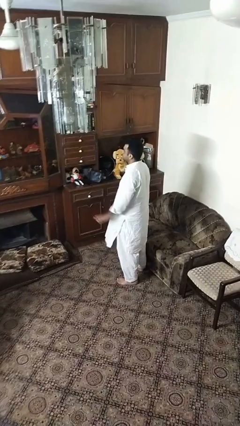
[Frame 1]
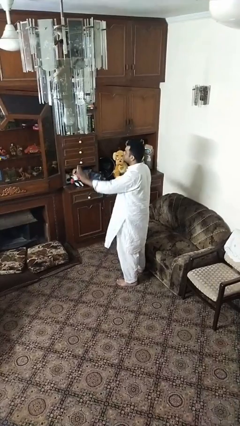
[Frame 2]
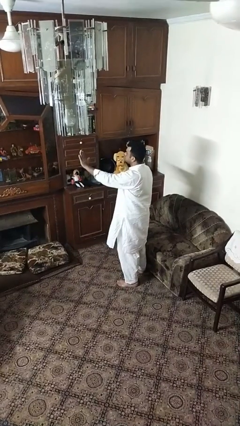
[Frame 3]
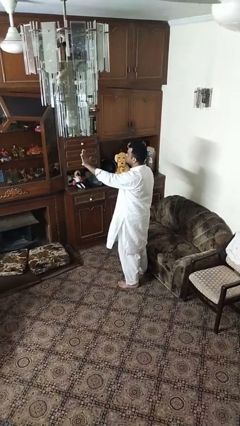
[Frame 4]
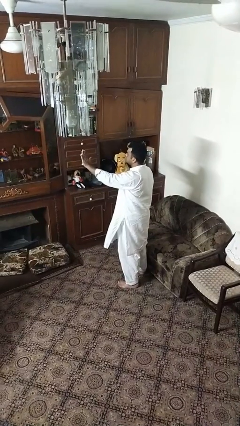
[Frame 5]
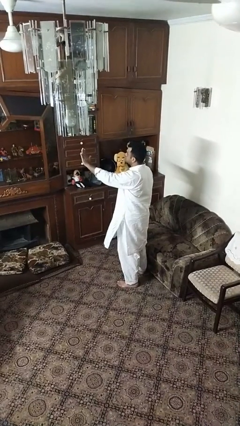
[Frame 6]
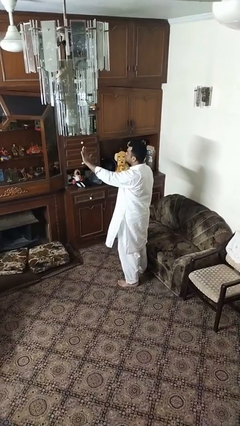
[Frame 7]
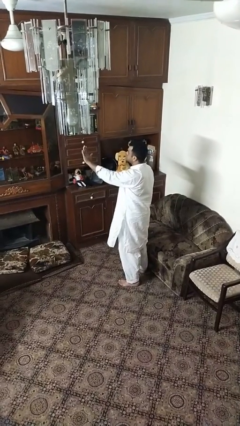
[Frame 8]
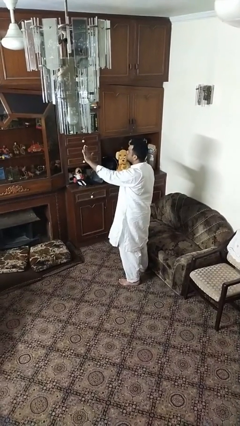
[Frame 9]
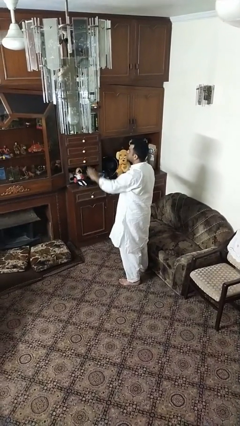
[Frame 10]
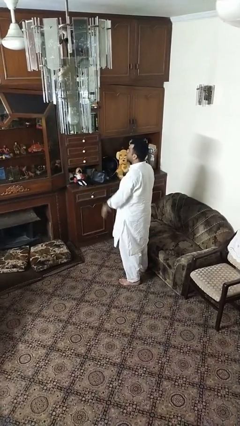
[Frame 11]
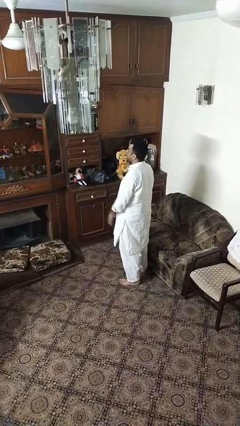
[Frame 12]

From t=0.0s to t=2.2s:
person gestures stop

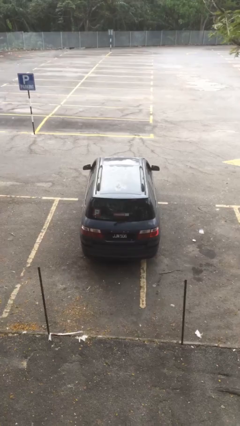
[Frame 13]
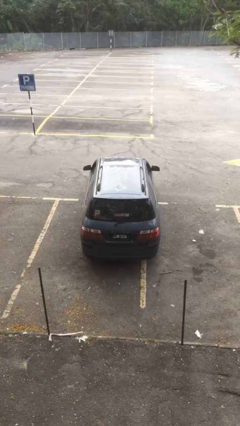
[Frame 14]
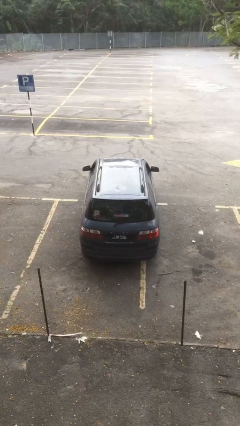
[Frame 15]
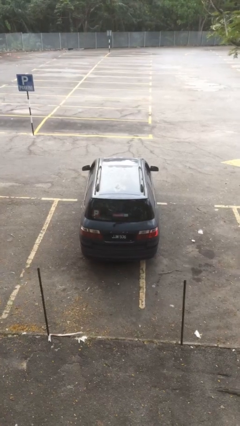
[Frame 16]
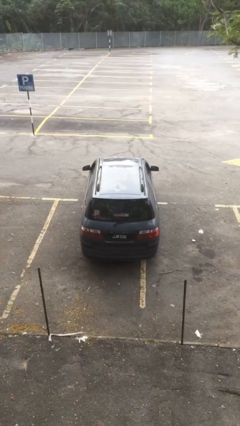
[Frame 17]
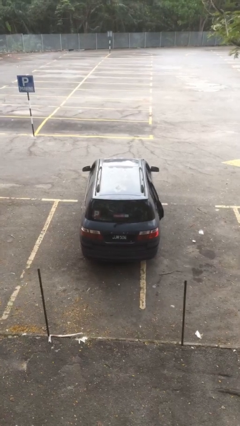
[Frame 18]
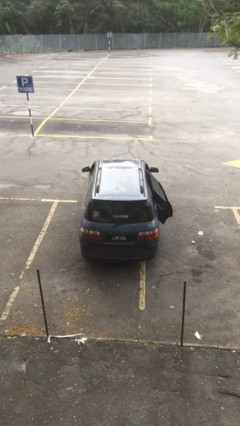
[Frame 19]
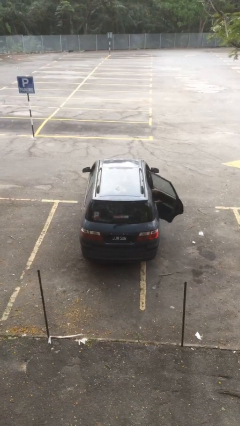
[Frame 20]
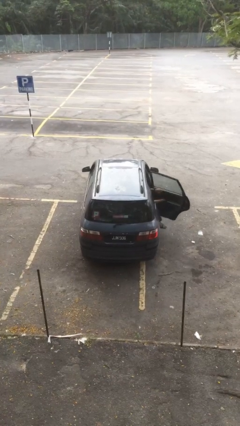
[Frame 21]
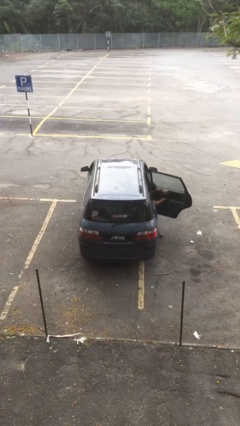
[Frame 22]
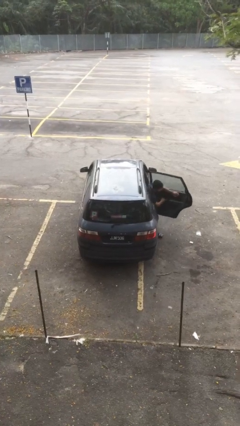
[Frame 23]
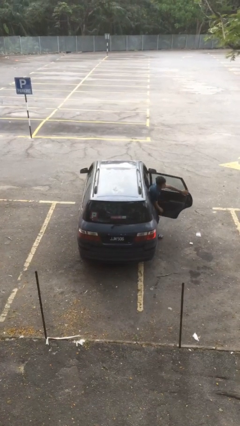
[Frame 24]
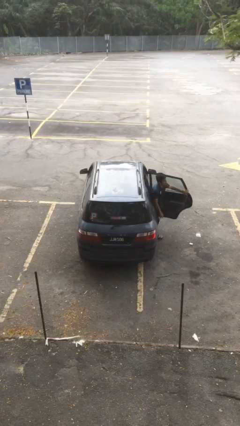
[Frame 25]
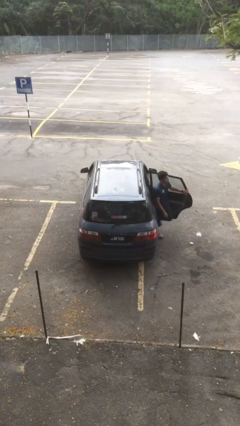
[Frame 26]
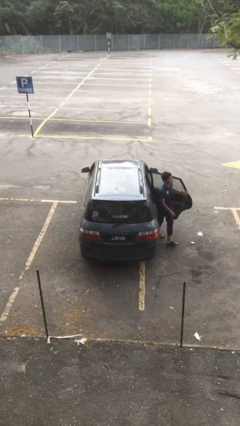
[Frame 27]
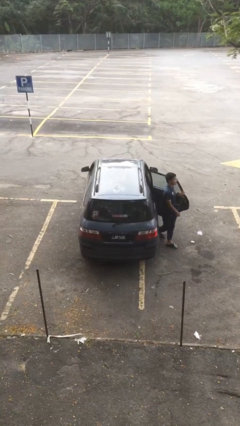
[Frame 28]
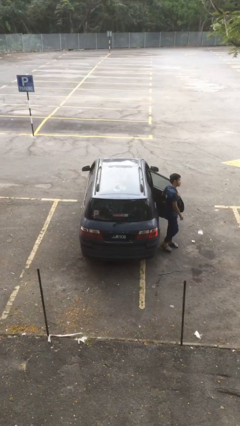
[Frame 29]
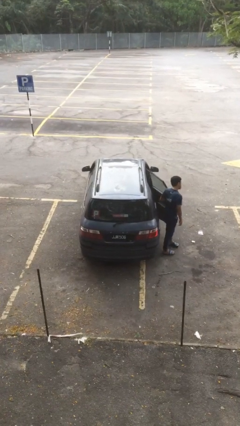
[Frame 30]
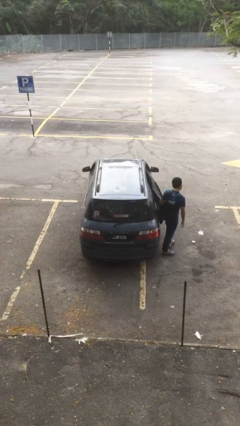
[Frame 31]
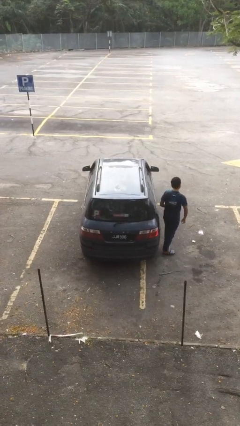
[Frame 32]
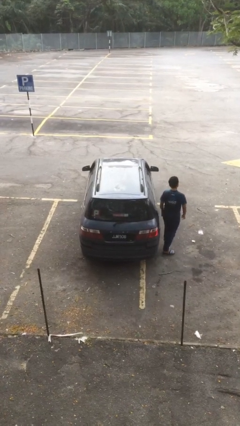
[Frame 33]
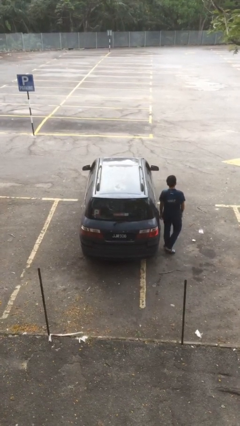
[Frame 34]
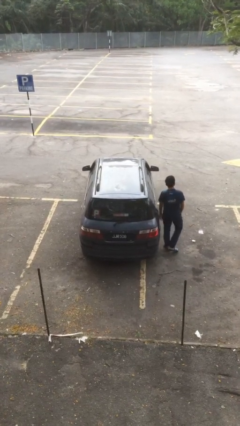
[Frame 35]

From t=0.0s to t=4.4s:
car drops off person

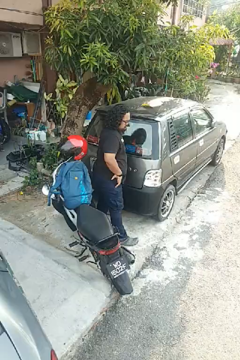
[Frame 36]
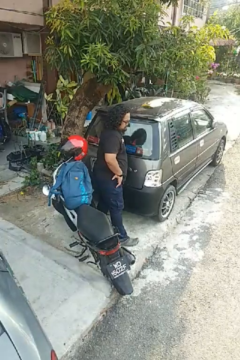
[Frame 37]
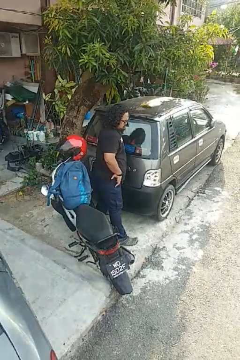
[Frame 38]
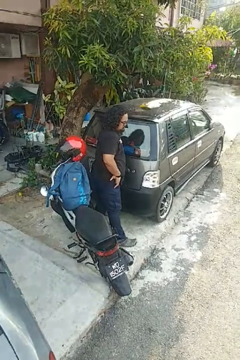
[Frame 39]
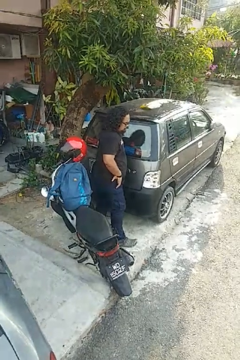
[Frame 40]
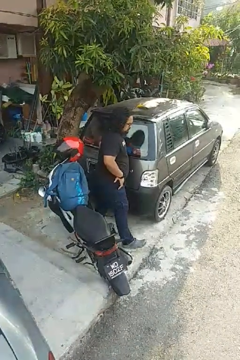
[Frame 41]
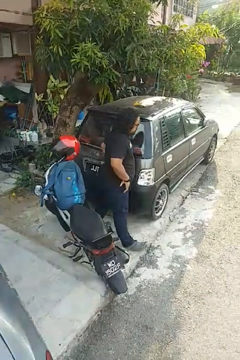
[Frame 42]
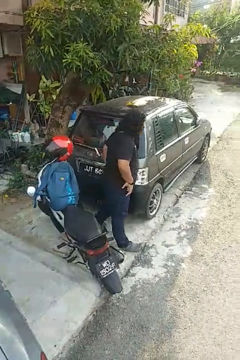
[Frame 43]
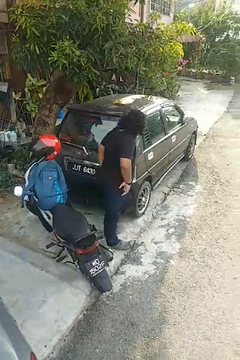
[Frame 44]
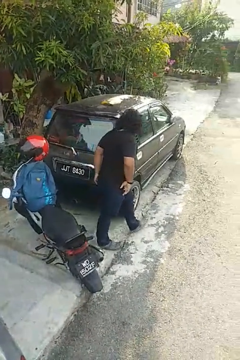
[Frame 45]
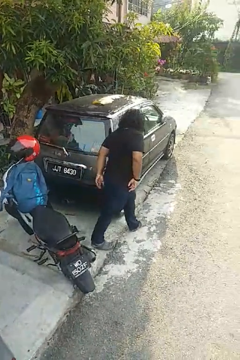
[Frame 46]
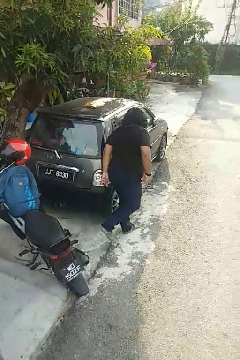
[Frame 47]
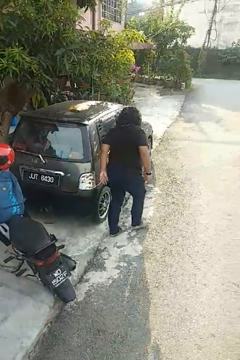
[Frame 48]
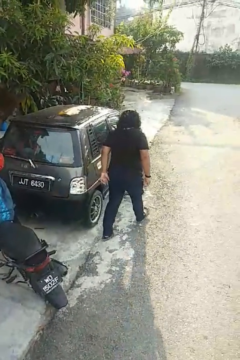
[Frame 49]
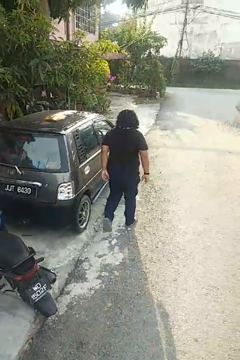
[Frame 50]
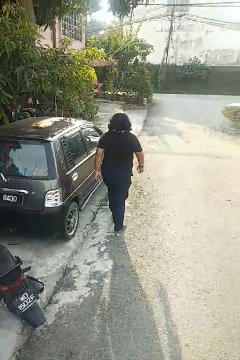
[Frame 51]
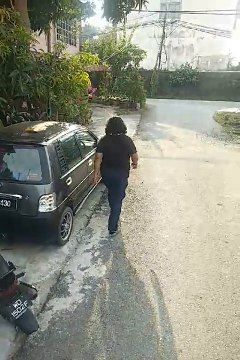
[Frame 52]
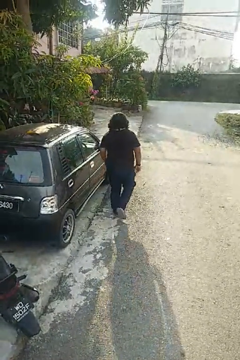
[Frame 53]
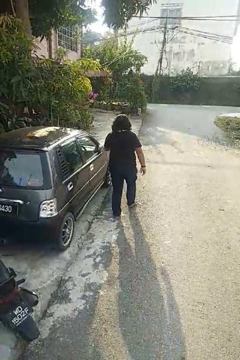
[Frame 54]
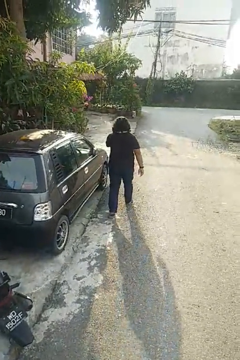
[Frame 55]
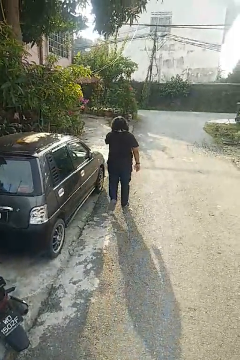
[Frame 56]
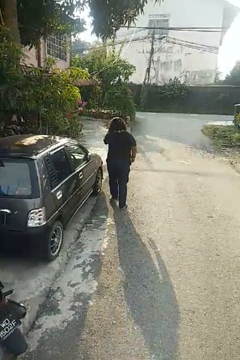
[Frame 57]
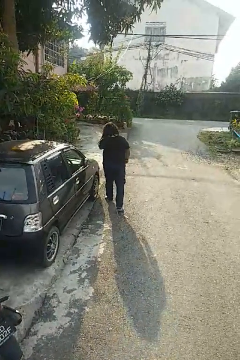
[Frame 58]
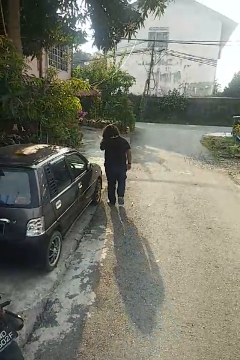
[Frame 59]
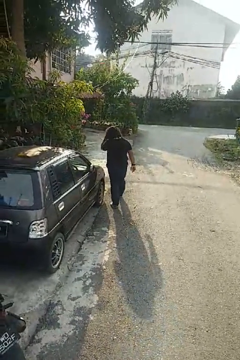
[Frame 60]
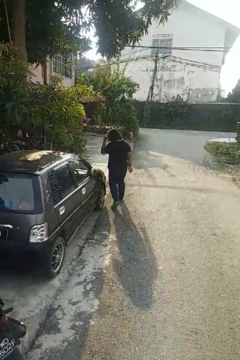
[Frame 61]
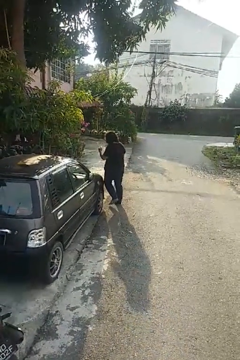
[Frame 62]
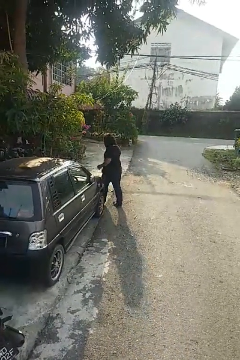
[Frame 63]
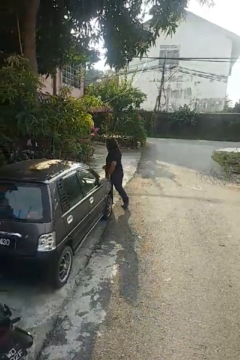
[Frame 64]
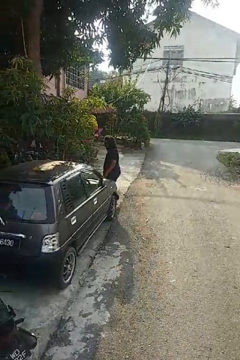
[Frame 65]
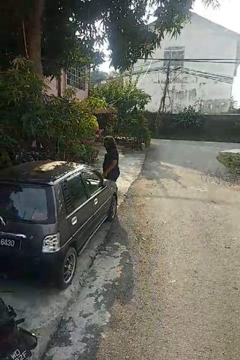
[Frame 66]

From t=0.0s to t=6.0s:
person walks around car

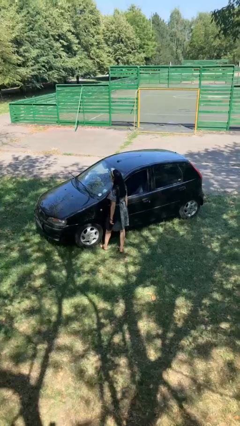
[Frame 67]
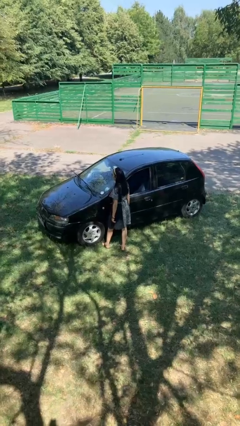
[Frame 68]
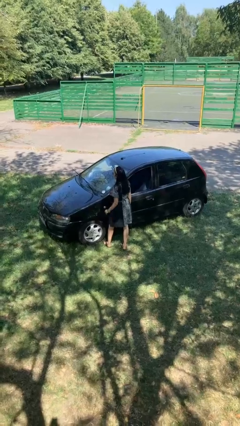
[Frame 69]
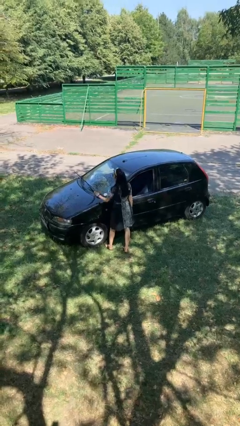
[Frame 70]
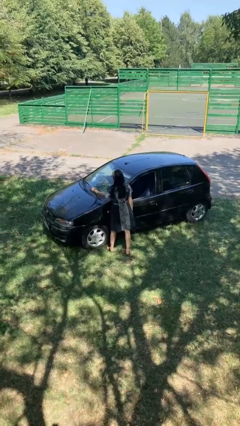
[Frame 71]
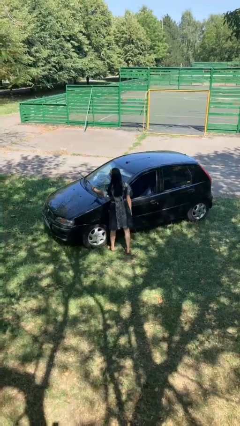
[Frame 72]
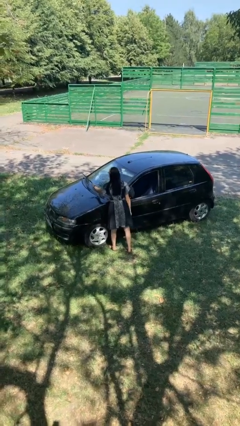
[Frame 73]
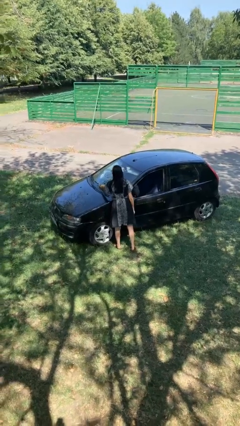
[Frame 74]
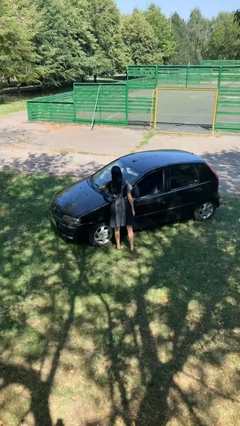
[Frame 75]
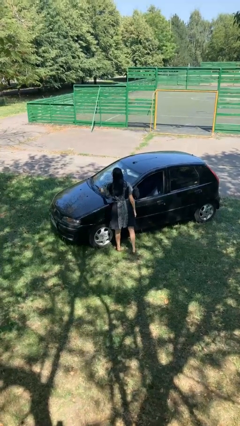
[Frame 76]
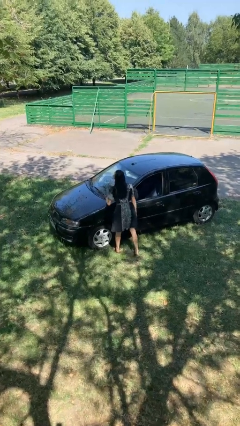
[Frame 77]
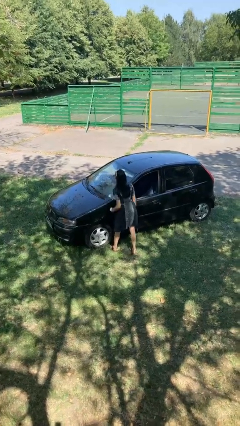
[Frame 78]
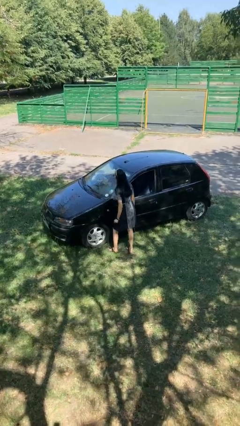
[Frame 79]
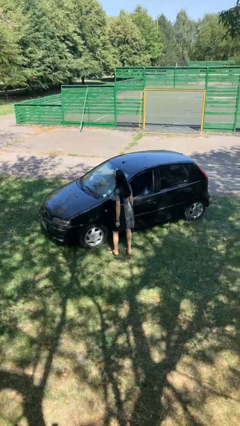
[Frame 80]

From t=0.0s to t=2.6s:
person flips down car wipers

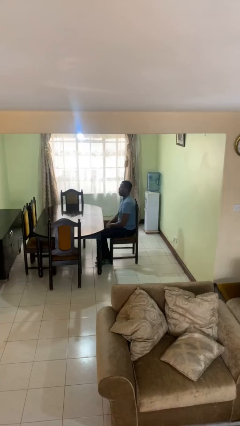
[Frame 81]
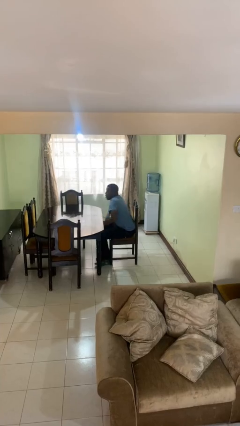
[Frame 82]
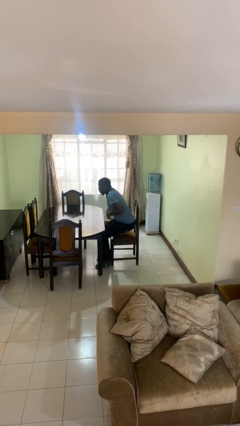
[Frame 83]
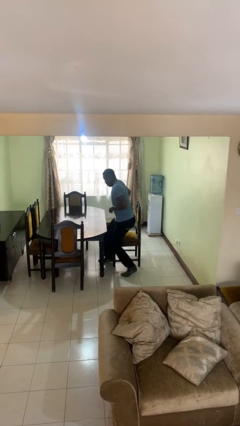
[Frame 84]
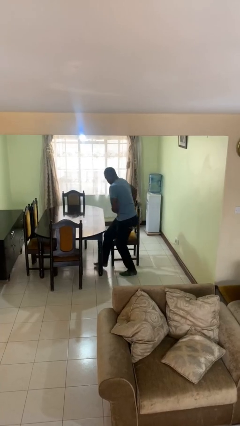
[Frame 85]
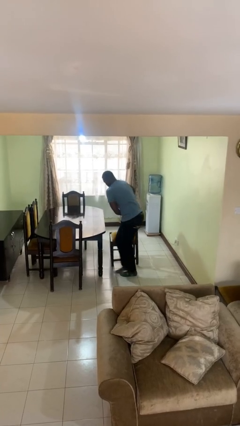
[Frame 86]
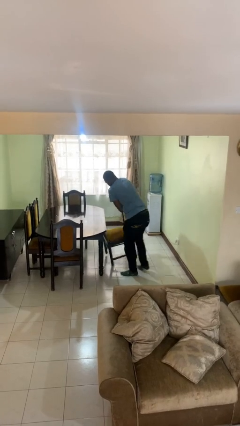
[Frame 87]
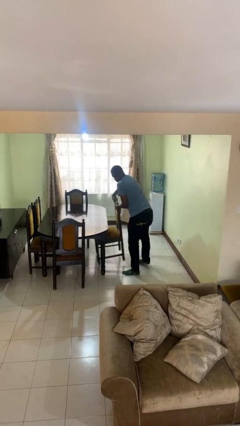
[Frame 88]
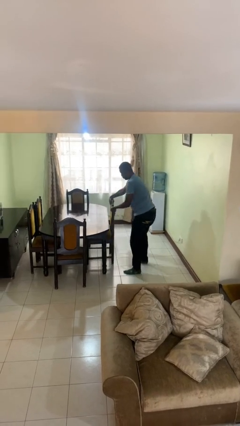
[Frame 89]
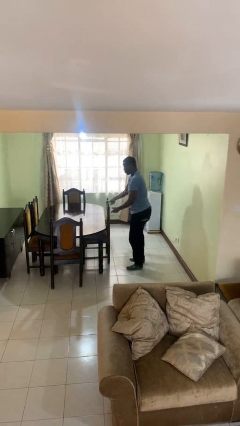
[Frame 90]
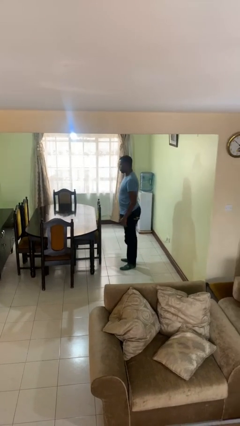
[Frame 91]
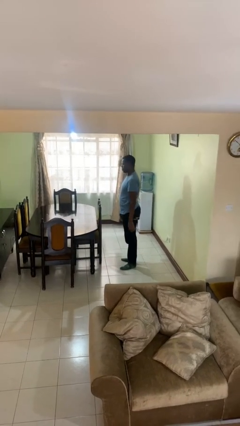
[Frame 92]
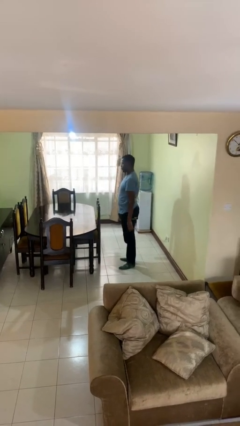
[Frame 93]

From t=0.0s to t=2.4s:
person stands up

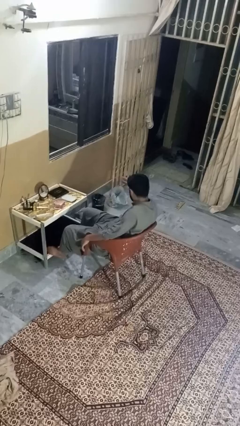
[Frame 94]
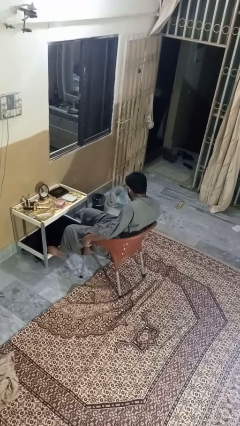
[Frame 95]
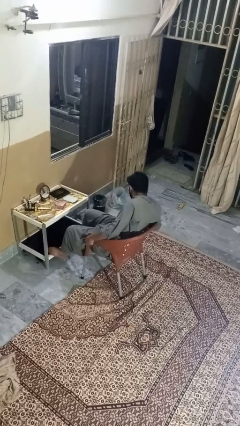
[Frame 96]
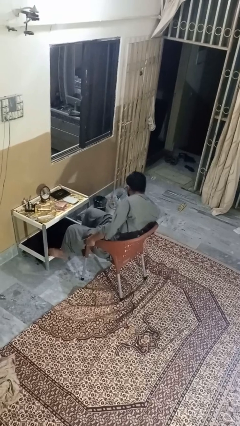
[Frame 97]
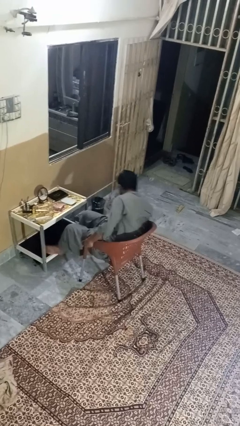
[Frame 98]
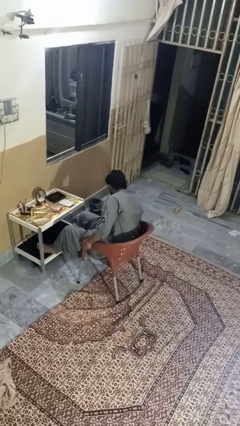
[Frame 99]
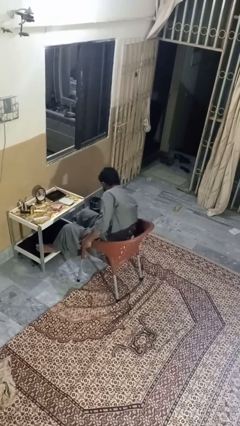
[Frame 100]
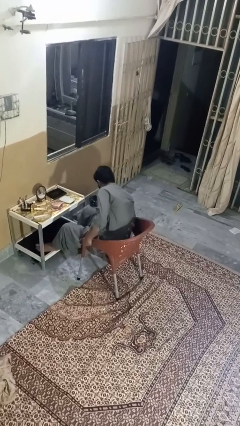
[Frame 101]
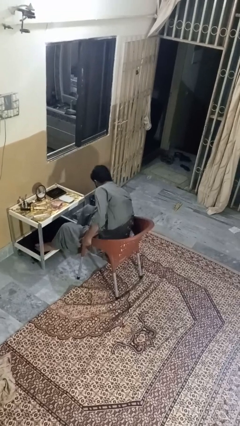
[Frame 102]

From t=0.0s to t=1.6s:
person throws object to ground
